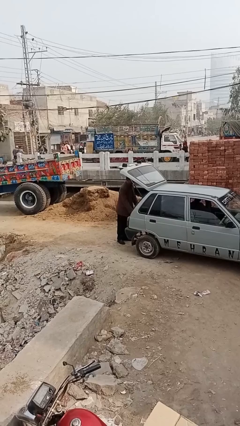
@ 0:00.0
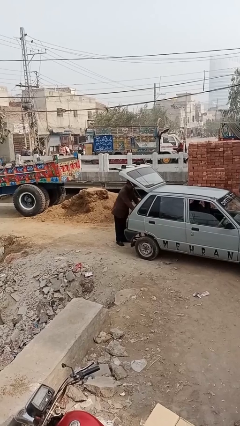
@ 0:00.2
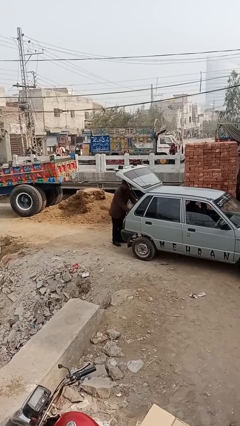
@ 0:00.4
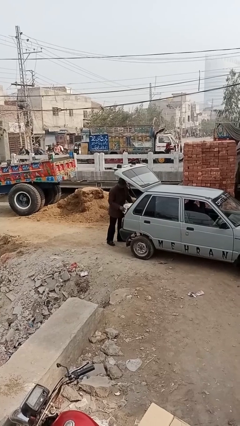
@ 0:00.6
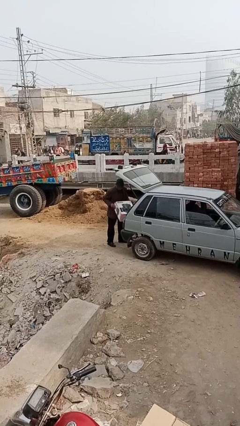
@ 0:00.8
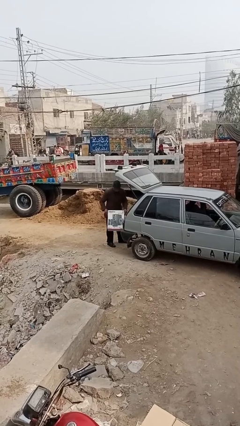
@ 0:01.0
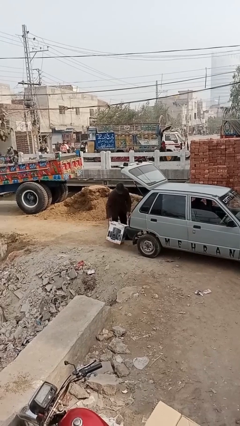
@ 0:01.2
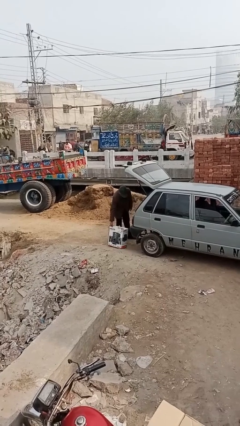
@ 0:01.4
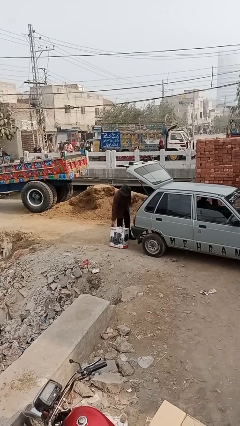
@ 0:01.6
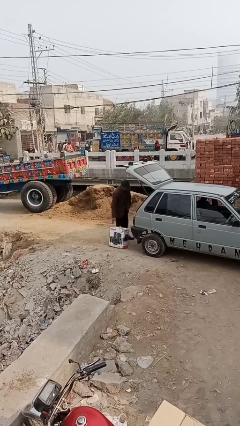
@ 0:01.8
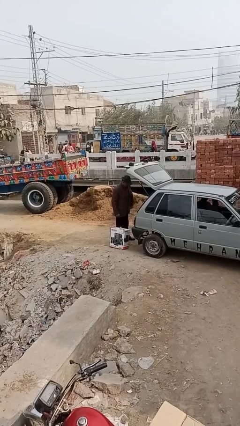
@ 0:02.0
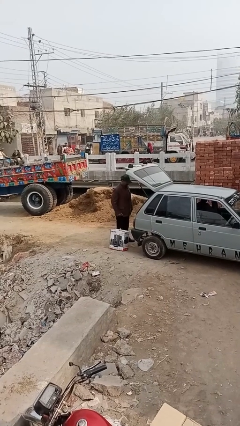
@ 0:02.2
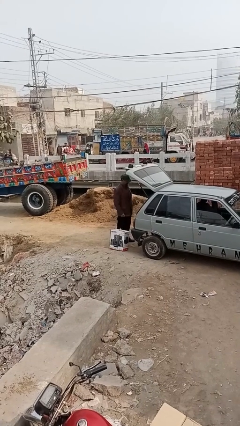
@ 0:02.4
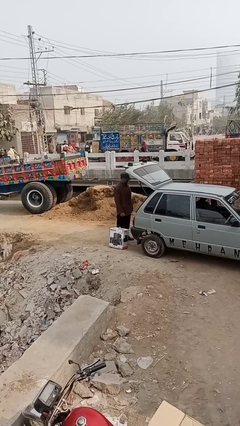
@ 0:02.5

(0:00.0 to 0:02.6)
person unloads car

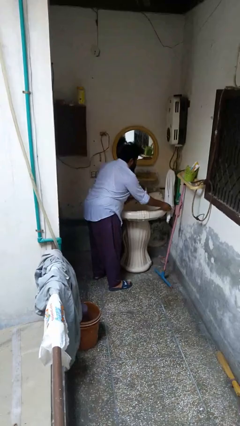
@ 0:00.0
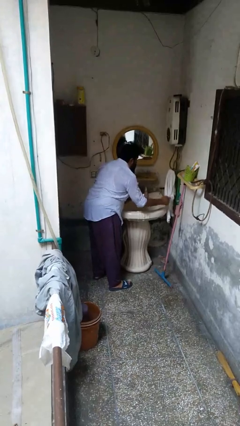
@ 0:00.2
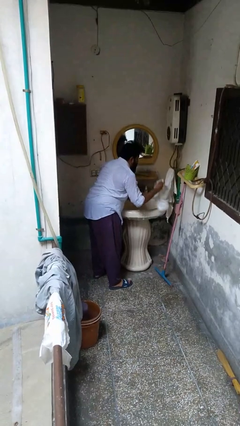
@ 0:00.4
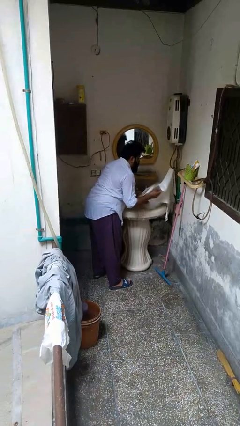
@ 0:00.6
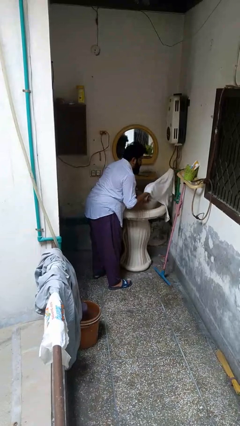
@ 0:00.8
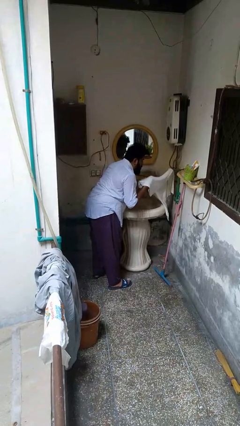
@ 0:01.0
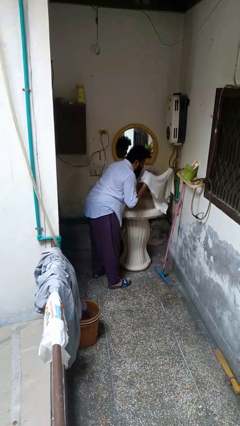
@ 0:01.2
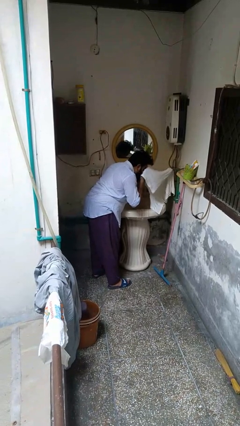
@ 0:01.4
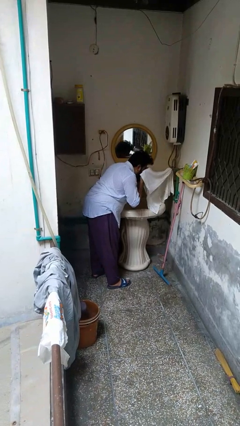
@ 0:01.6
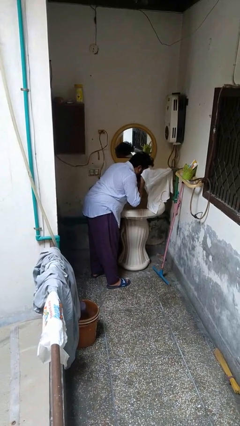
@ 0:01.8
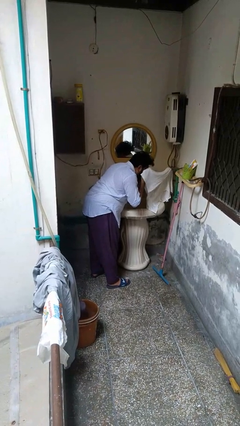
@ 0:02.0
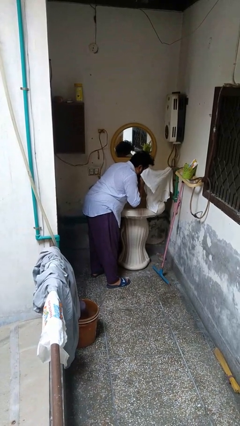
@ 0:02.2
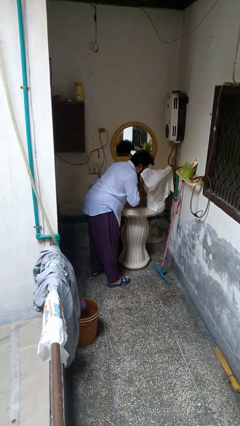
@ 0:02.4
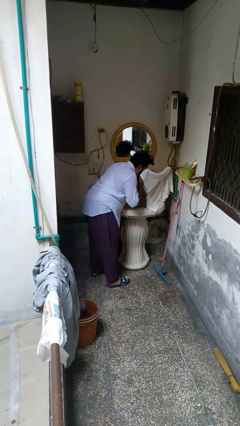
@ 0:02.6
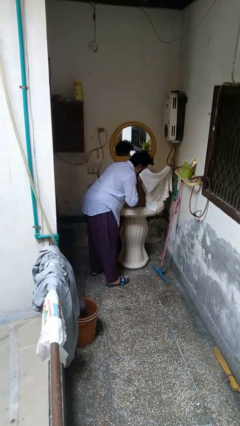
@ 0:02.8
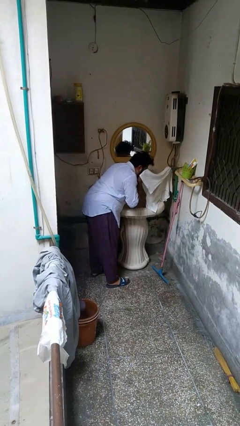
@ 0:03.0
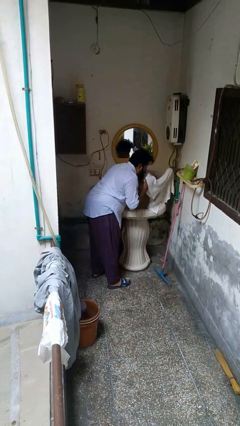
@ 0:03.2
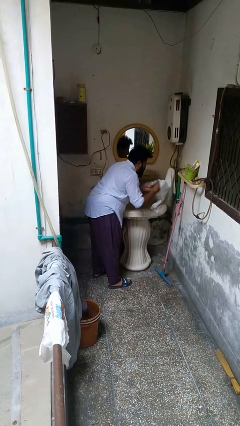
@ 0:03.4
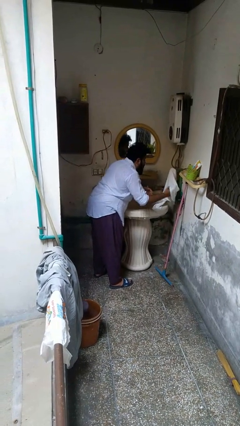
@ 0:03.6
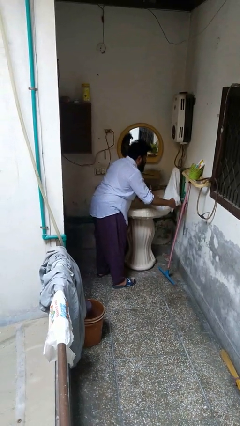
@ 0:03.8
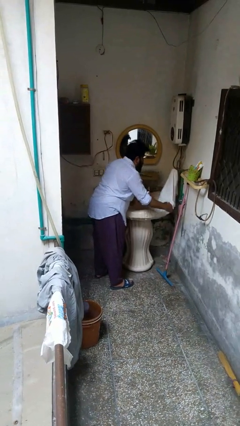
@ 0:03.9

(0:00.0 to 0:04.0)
person dries face with towel

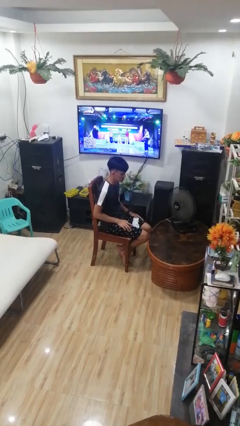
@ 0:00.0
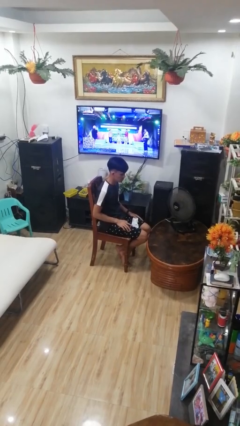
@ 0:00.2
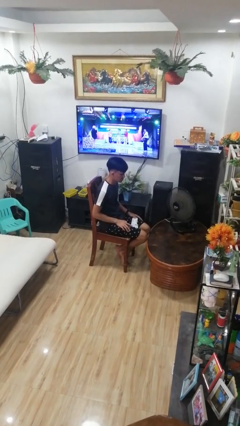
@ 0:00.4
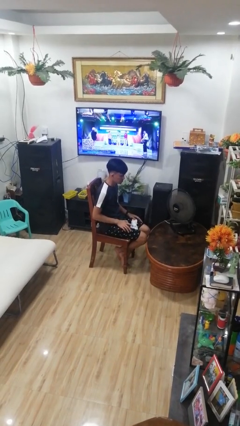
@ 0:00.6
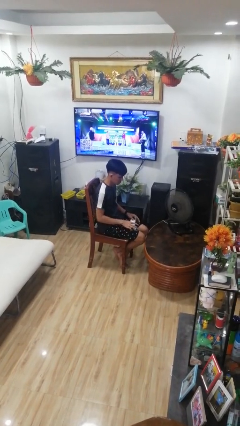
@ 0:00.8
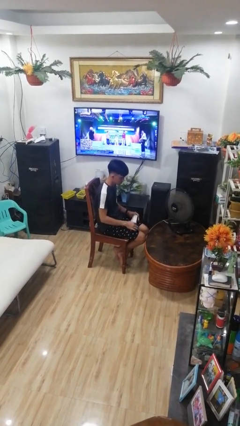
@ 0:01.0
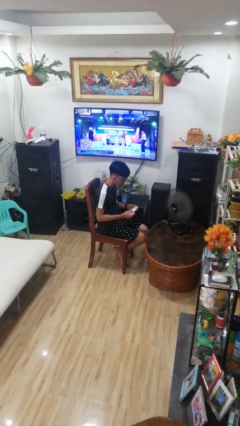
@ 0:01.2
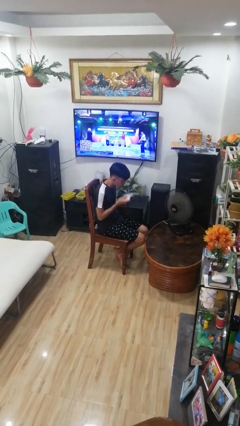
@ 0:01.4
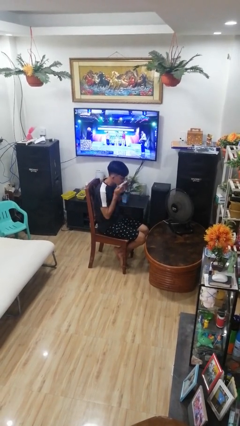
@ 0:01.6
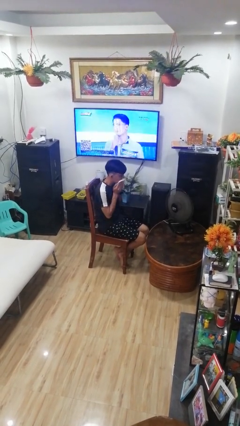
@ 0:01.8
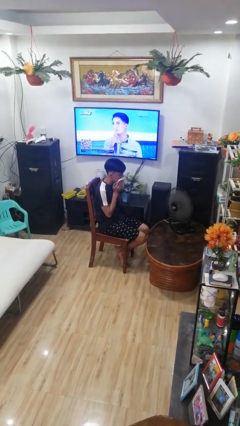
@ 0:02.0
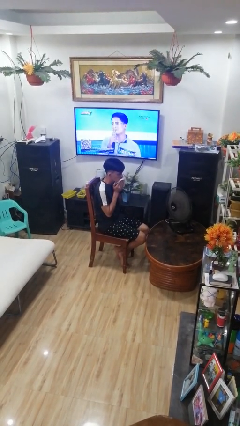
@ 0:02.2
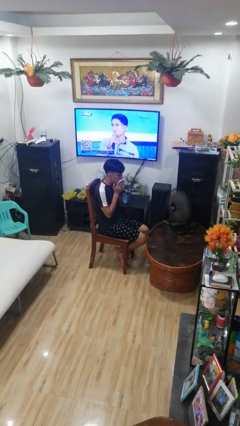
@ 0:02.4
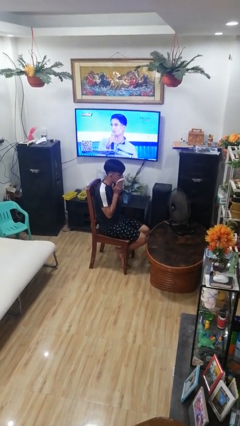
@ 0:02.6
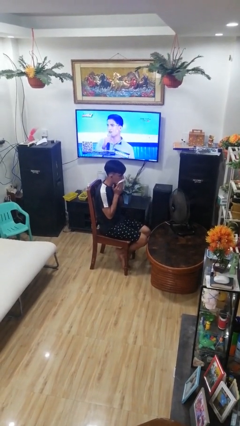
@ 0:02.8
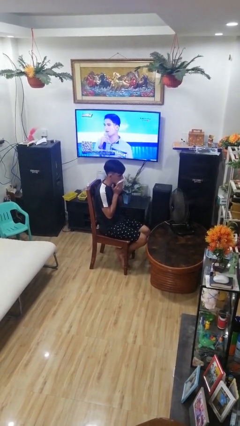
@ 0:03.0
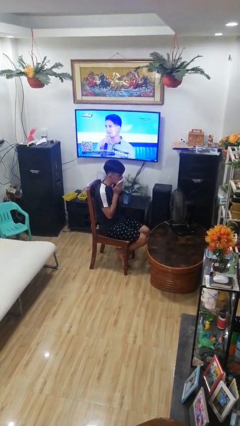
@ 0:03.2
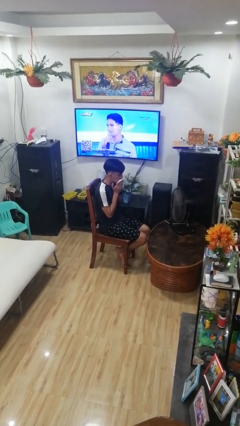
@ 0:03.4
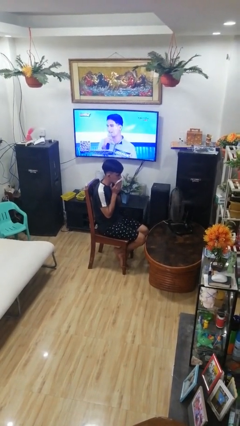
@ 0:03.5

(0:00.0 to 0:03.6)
person wipes mouth with napkin

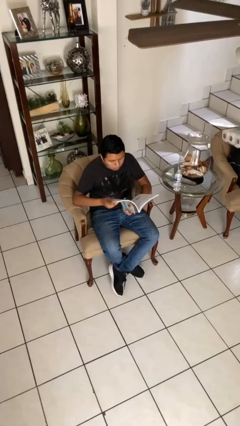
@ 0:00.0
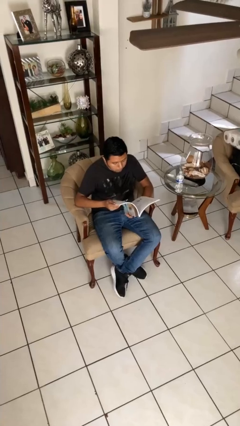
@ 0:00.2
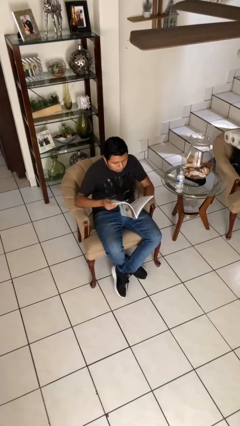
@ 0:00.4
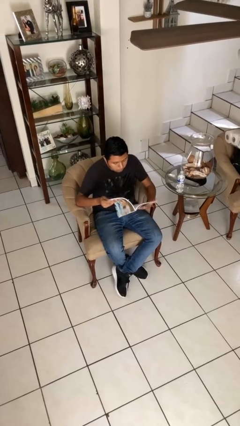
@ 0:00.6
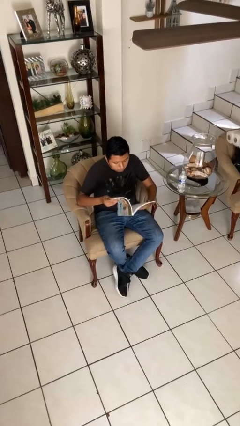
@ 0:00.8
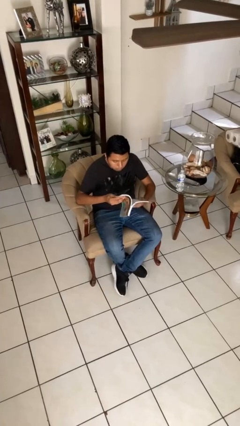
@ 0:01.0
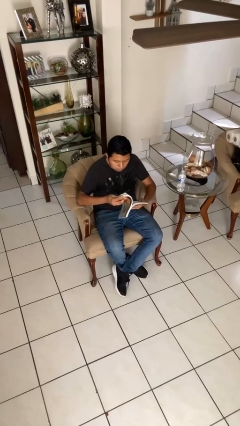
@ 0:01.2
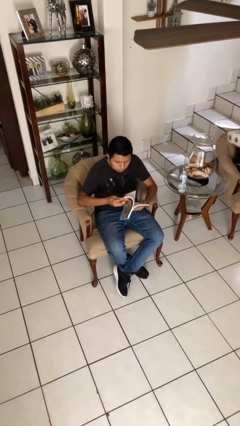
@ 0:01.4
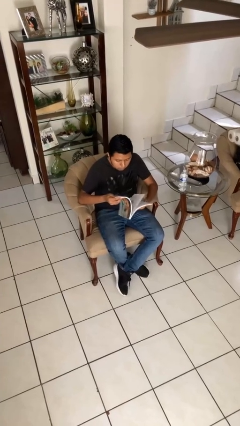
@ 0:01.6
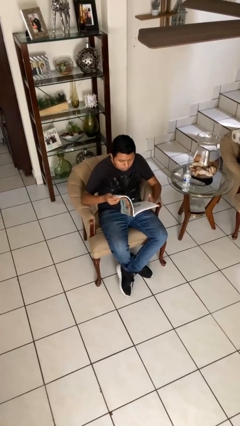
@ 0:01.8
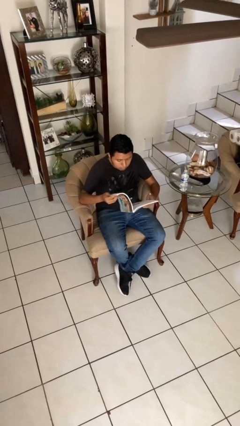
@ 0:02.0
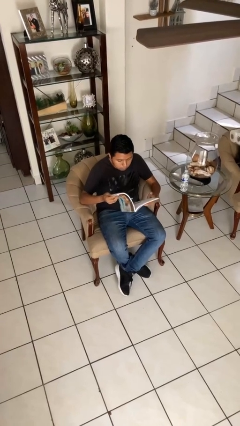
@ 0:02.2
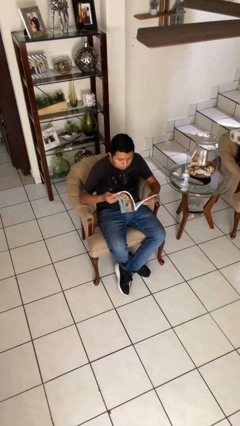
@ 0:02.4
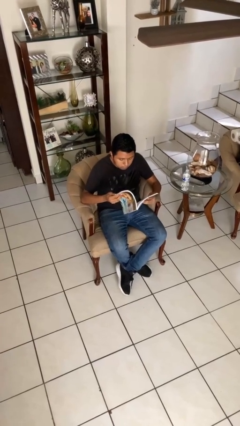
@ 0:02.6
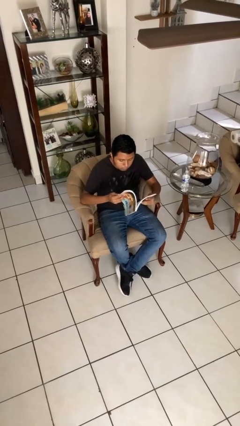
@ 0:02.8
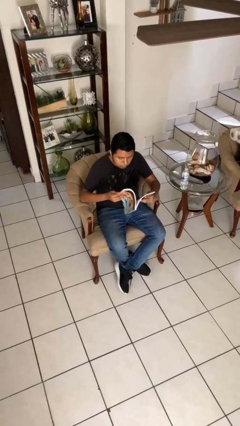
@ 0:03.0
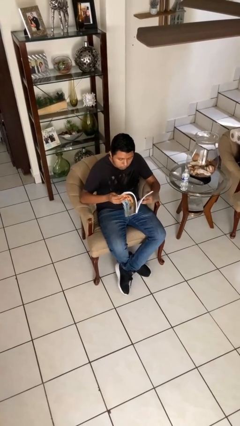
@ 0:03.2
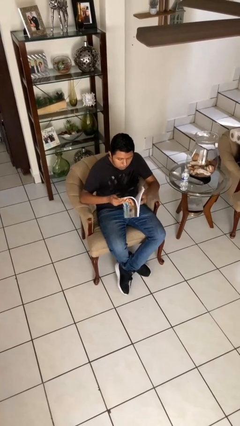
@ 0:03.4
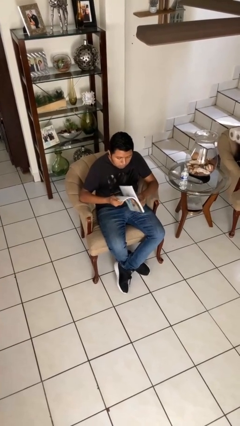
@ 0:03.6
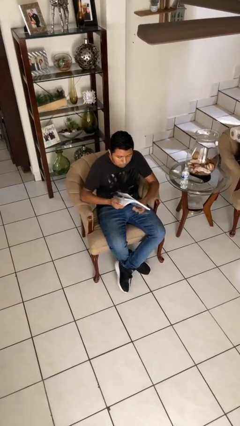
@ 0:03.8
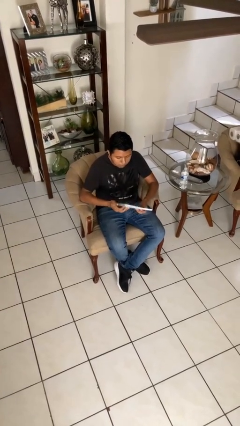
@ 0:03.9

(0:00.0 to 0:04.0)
person reads magazine

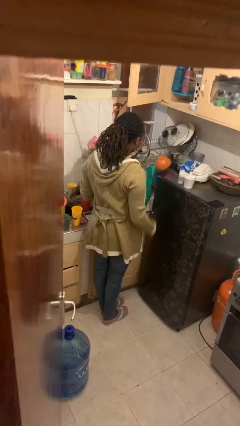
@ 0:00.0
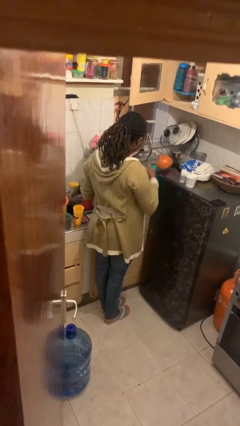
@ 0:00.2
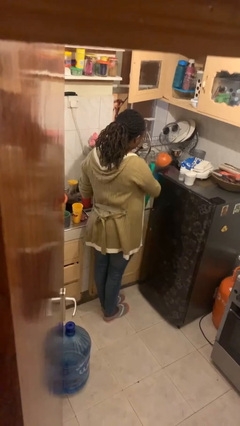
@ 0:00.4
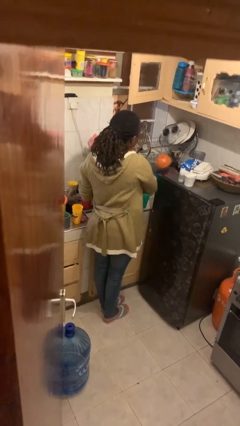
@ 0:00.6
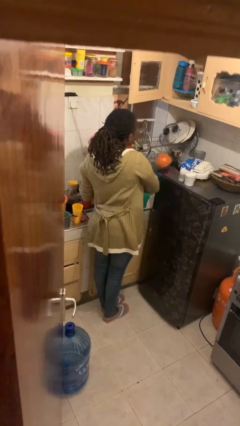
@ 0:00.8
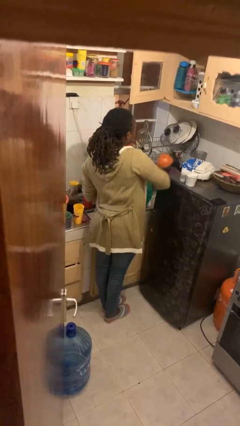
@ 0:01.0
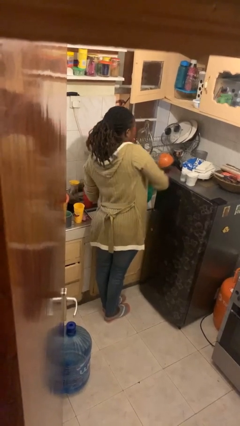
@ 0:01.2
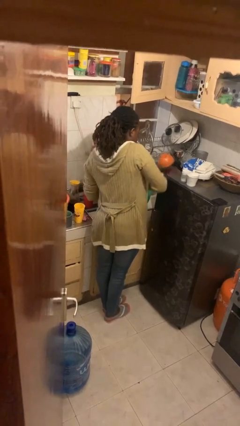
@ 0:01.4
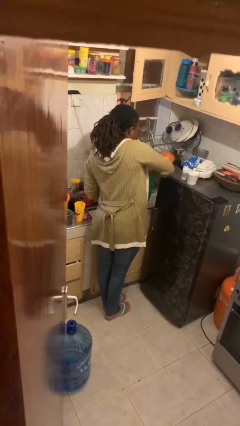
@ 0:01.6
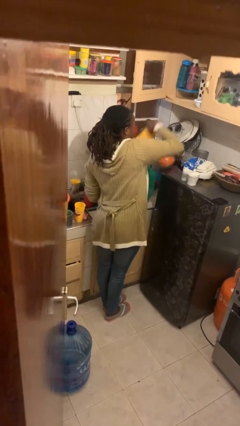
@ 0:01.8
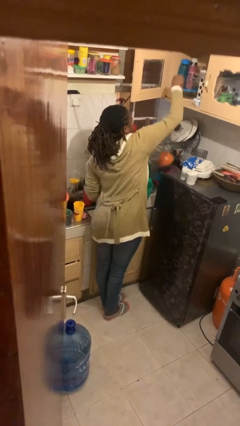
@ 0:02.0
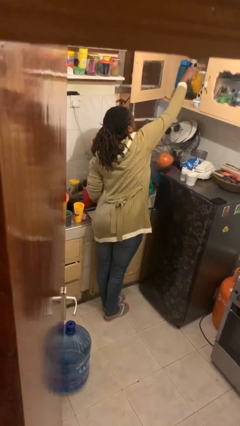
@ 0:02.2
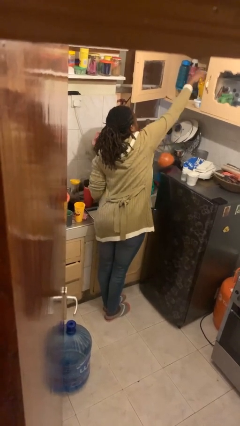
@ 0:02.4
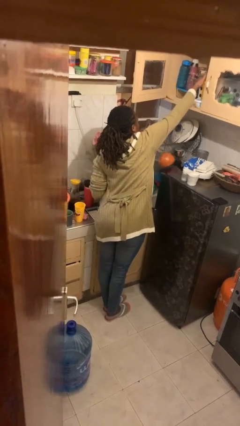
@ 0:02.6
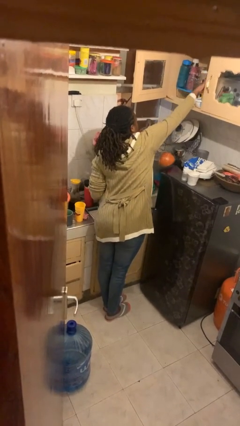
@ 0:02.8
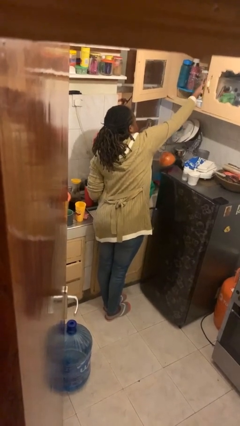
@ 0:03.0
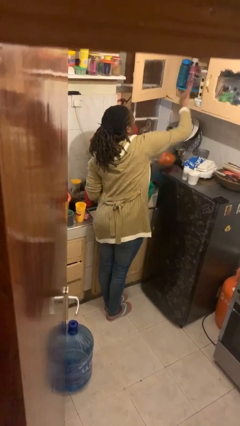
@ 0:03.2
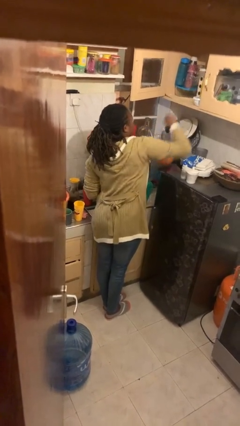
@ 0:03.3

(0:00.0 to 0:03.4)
person loads groceries into cabinet
